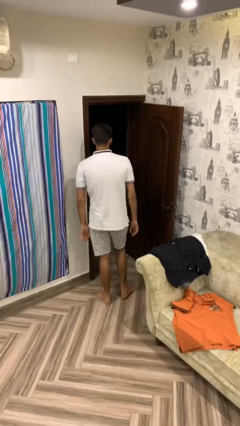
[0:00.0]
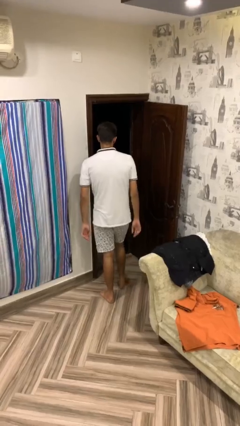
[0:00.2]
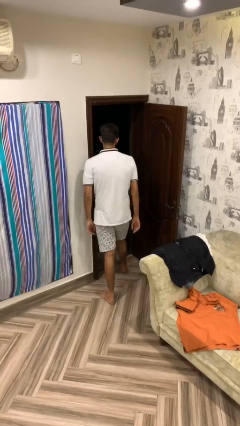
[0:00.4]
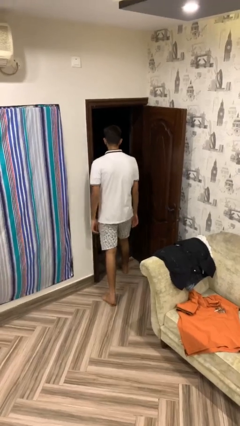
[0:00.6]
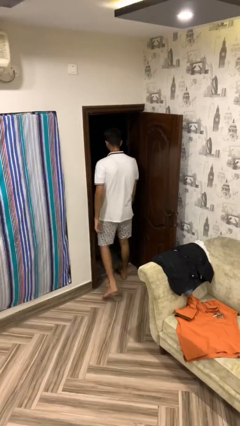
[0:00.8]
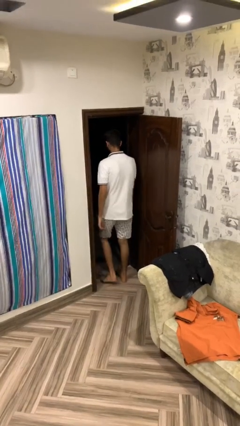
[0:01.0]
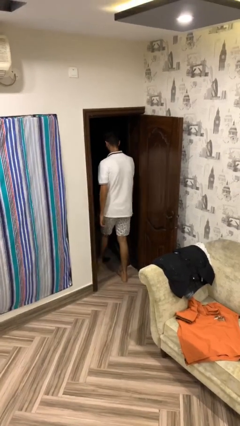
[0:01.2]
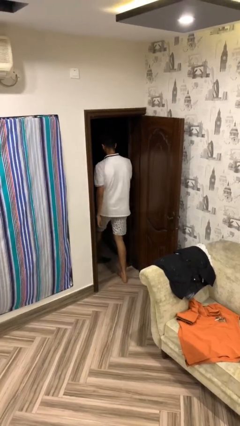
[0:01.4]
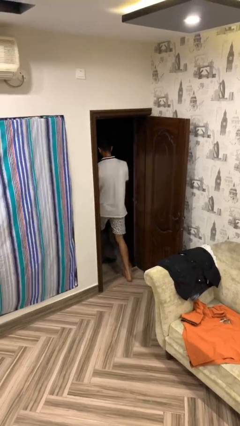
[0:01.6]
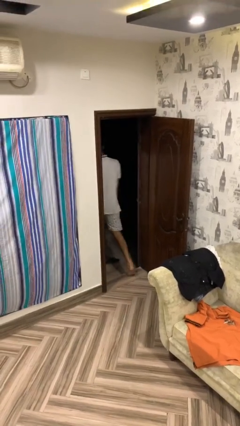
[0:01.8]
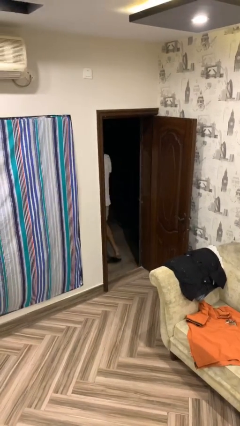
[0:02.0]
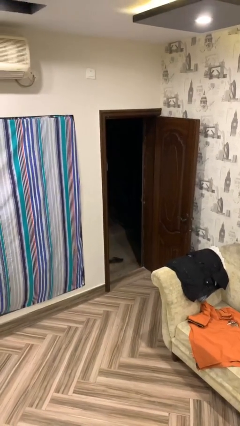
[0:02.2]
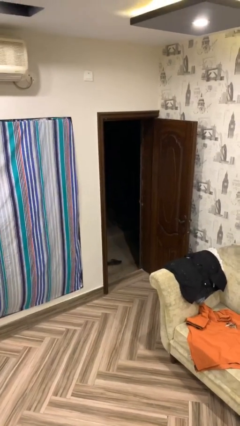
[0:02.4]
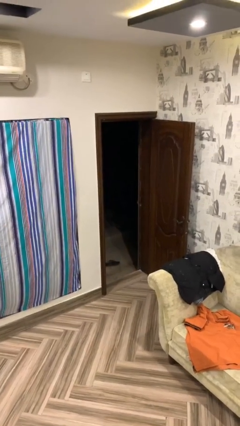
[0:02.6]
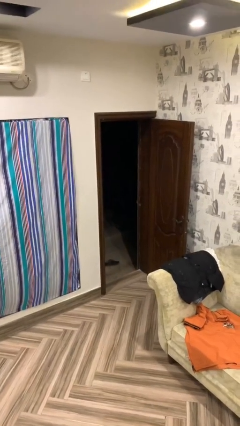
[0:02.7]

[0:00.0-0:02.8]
person exits scene through structure

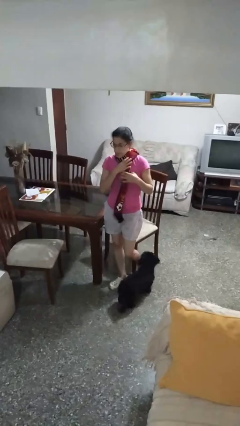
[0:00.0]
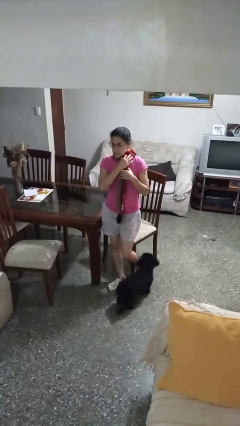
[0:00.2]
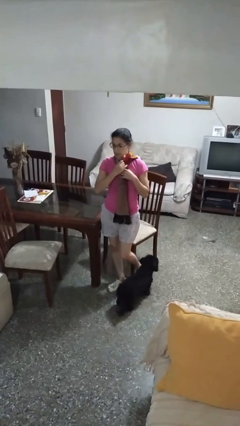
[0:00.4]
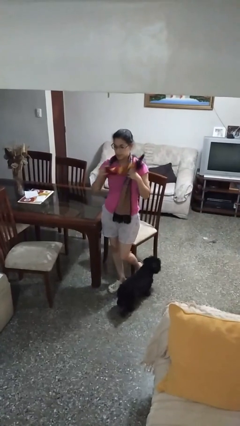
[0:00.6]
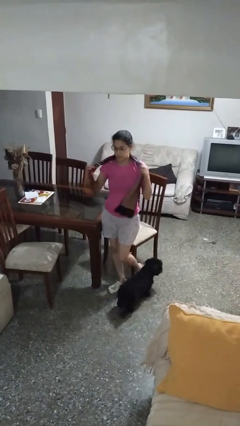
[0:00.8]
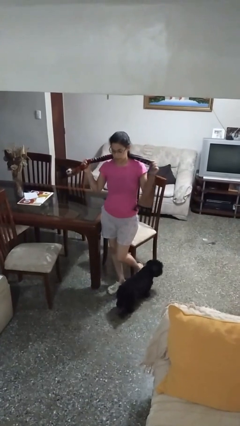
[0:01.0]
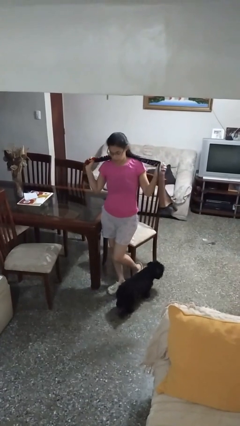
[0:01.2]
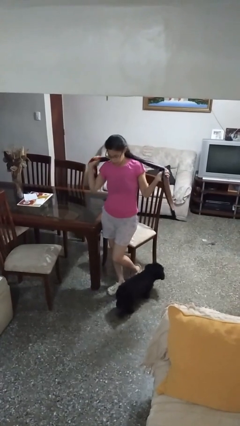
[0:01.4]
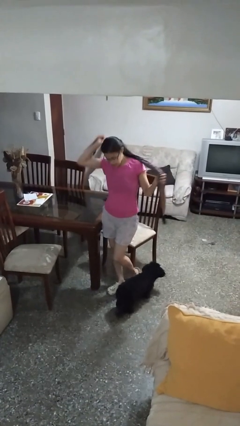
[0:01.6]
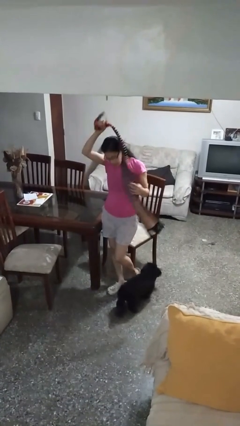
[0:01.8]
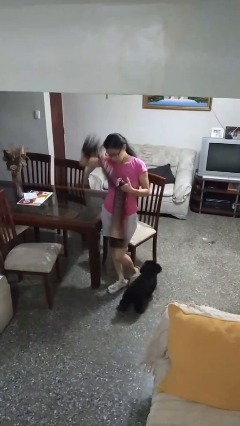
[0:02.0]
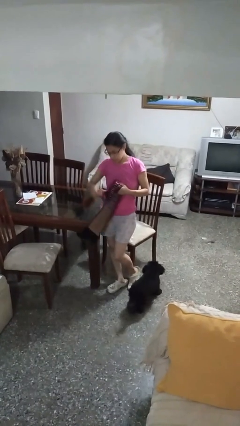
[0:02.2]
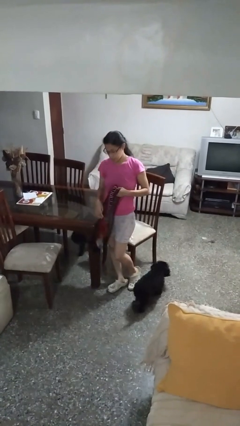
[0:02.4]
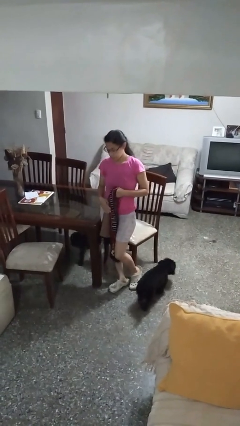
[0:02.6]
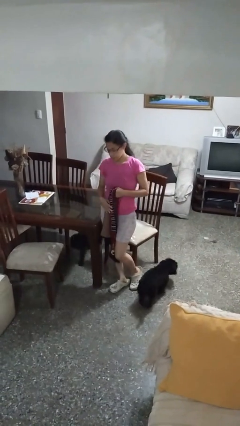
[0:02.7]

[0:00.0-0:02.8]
person takes off scarf

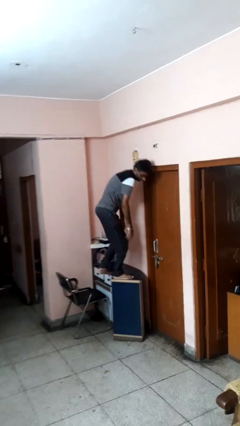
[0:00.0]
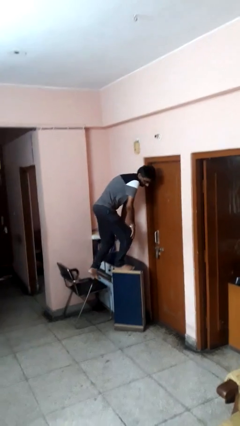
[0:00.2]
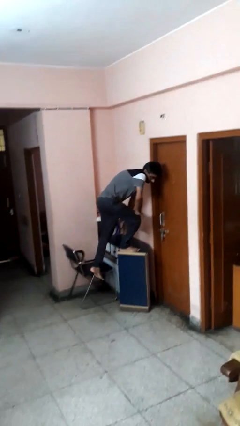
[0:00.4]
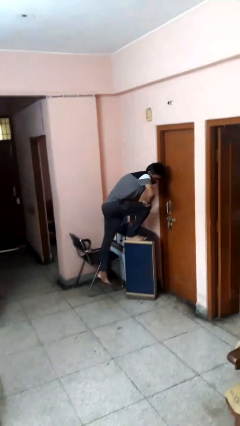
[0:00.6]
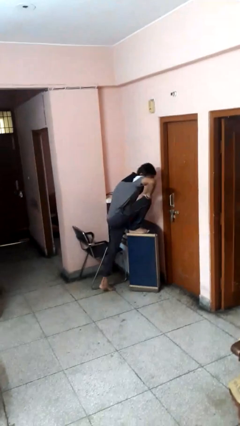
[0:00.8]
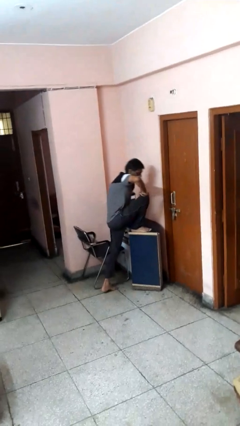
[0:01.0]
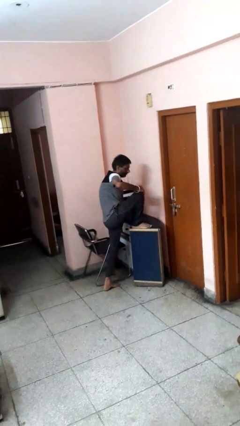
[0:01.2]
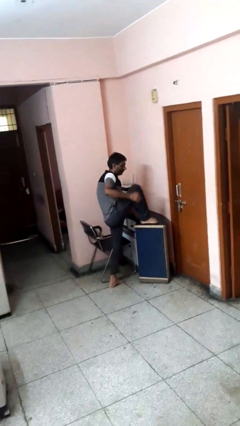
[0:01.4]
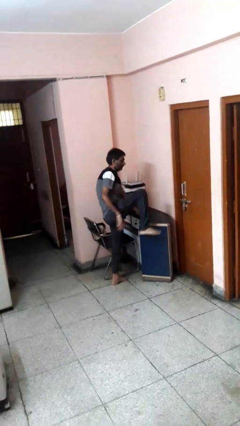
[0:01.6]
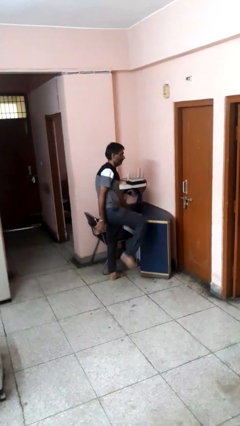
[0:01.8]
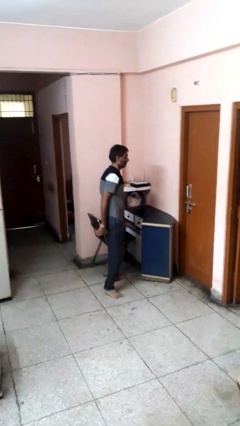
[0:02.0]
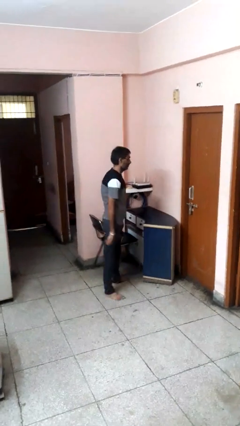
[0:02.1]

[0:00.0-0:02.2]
person climbs off table

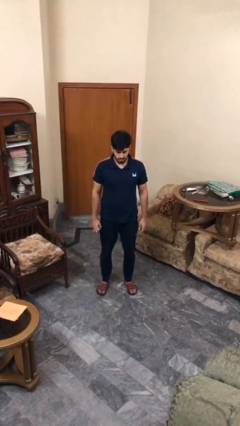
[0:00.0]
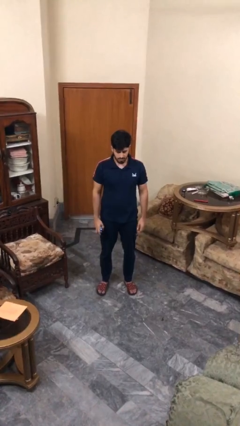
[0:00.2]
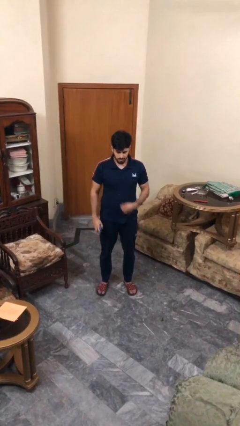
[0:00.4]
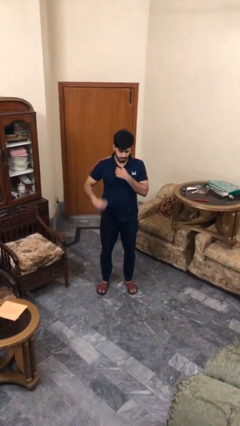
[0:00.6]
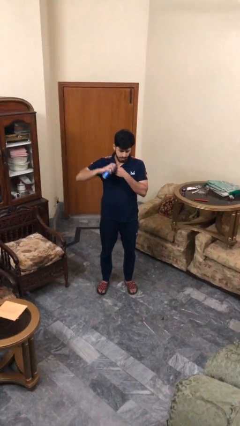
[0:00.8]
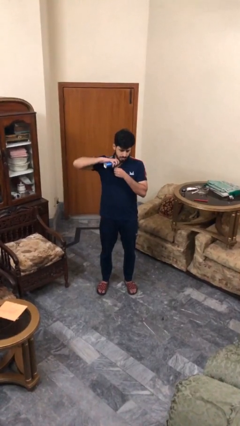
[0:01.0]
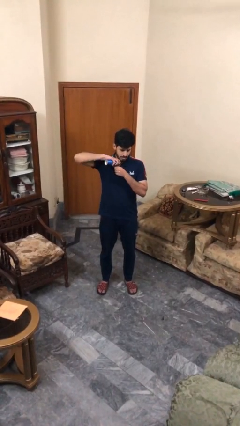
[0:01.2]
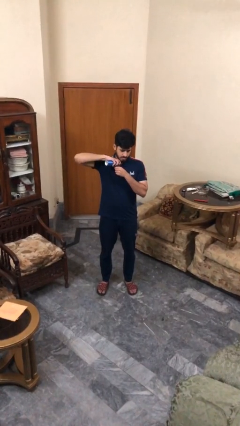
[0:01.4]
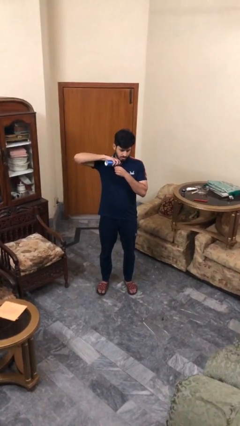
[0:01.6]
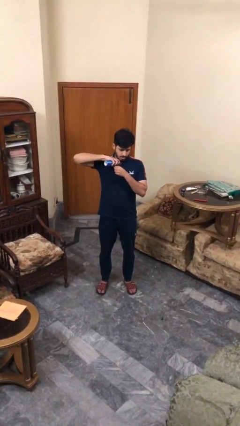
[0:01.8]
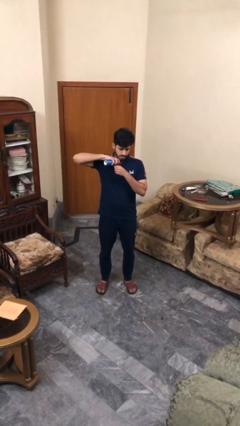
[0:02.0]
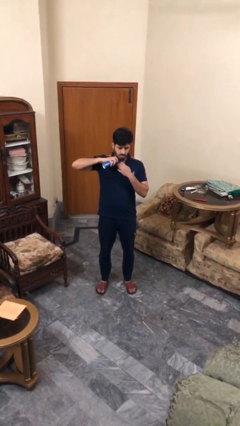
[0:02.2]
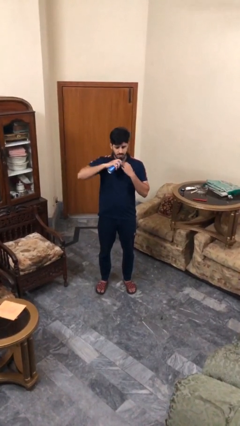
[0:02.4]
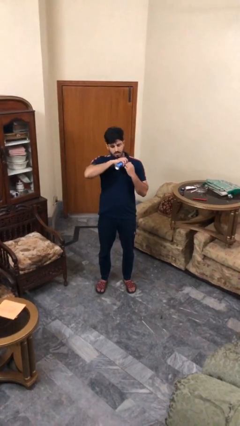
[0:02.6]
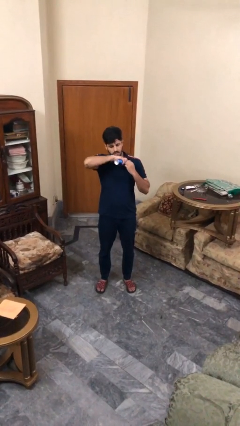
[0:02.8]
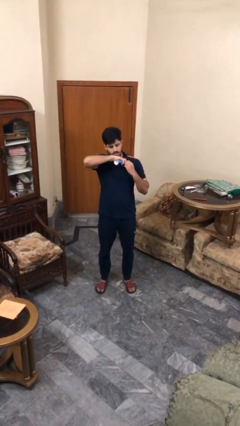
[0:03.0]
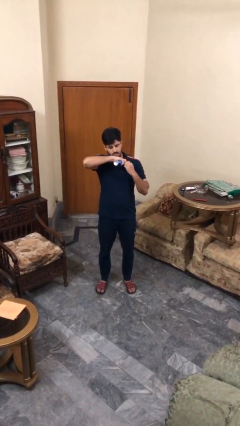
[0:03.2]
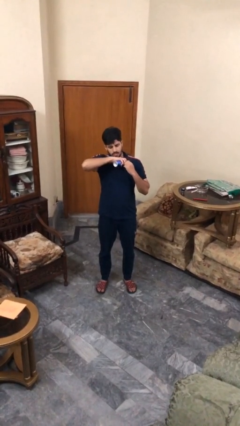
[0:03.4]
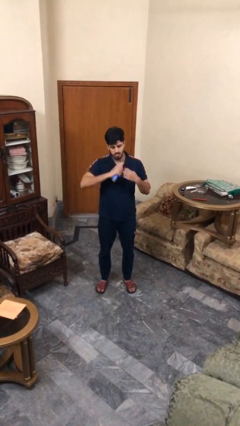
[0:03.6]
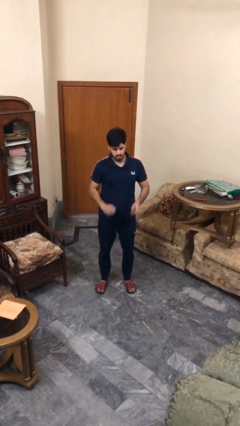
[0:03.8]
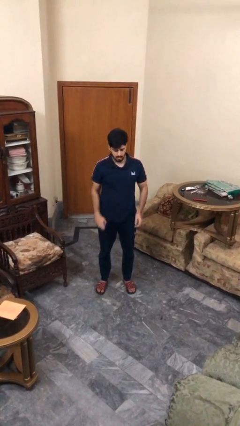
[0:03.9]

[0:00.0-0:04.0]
person applies deodorant

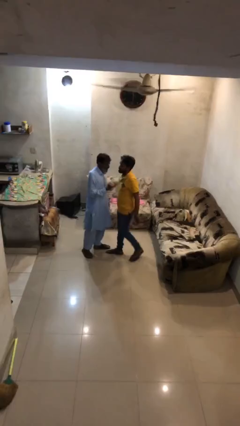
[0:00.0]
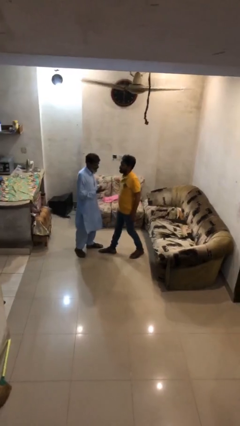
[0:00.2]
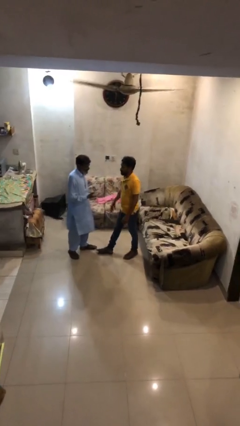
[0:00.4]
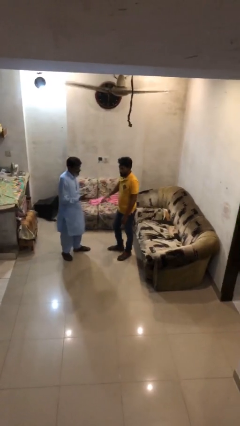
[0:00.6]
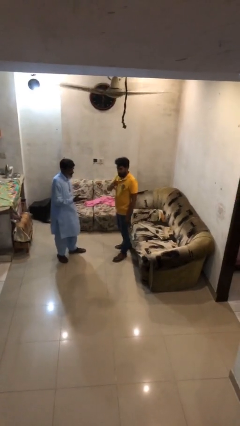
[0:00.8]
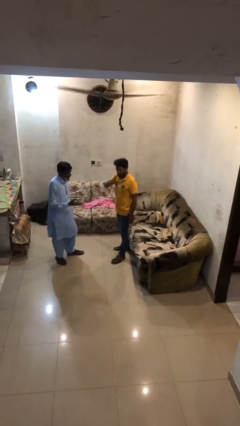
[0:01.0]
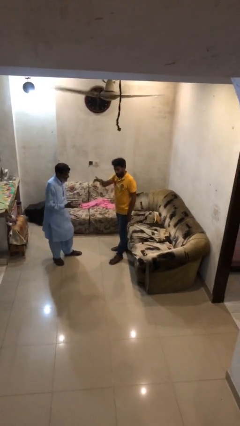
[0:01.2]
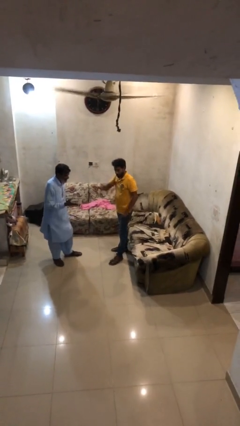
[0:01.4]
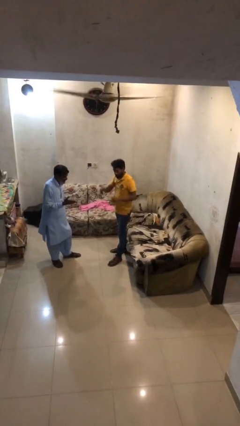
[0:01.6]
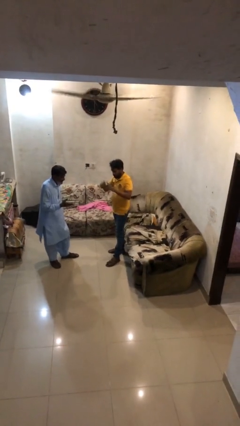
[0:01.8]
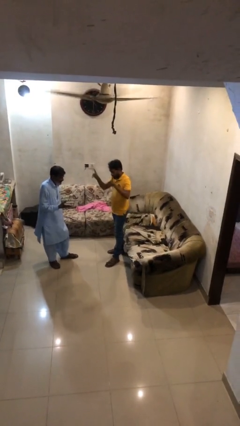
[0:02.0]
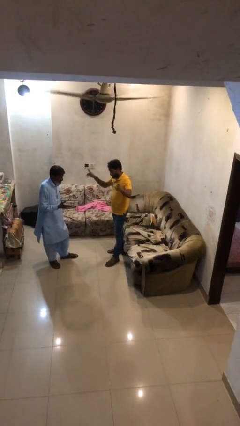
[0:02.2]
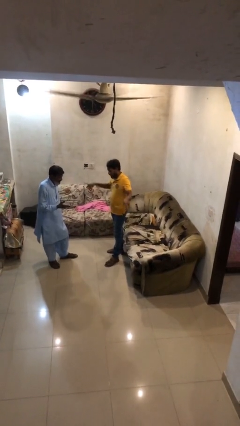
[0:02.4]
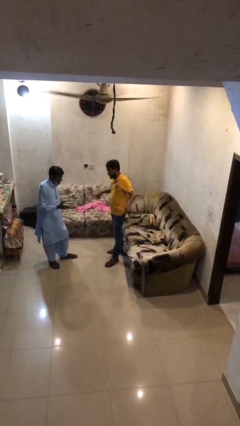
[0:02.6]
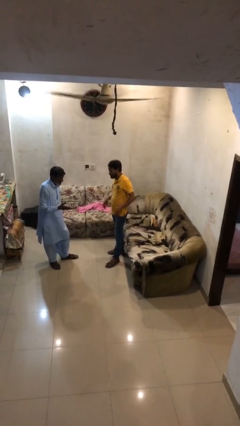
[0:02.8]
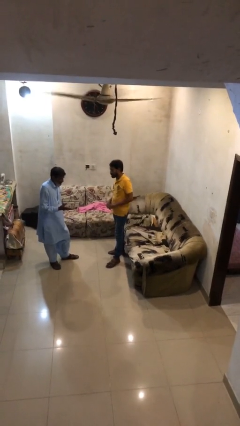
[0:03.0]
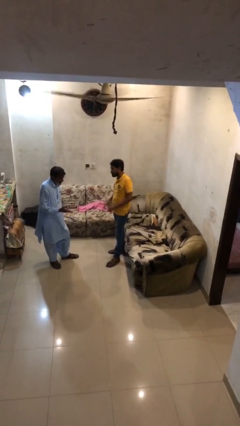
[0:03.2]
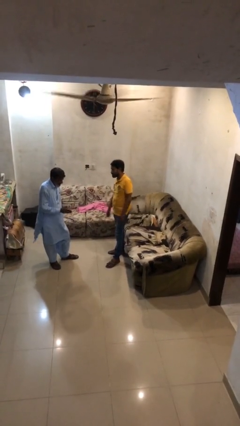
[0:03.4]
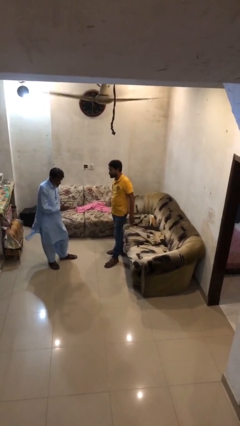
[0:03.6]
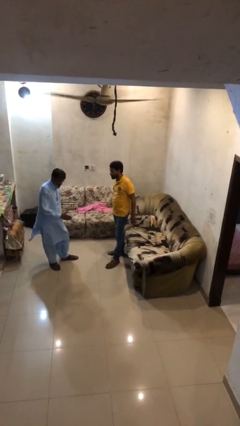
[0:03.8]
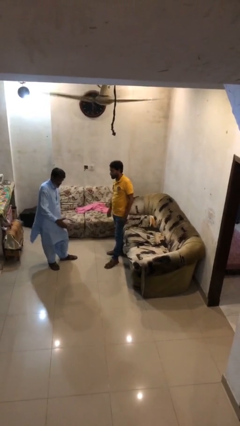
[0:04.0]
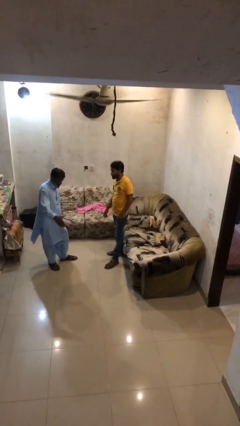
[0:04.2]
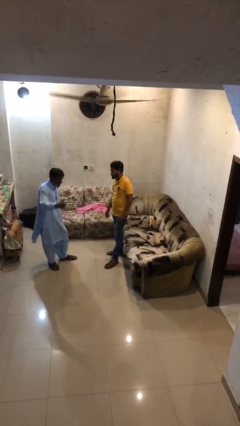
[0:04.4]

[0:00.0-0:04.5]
person talks to person

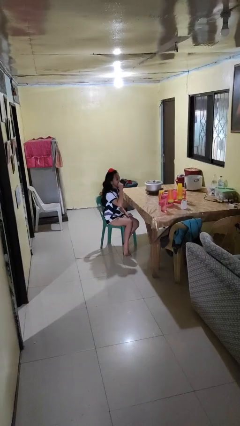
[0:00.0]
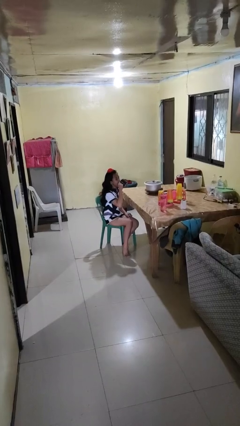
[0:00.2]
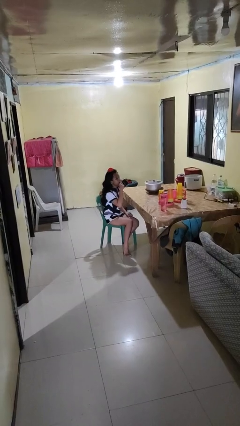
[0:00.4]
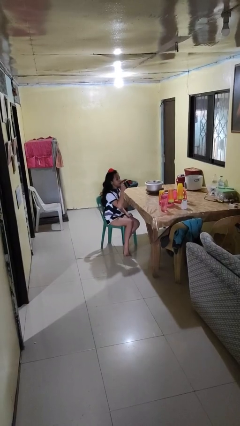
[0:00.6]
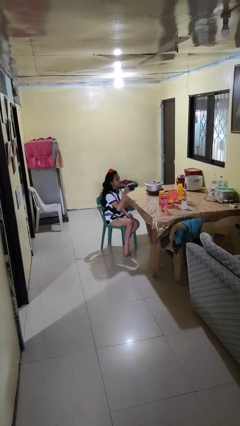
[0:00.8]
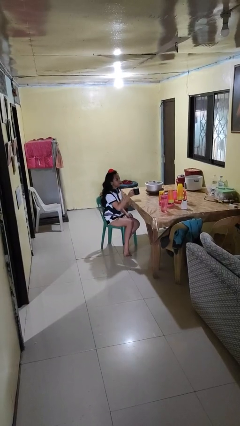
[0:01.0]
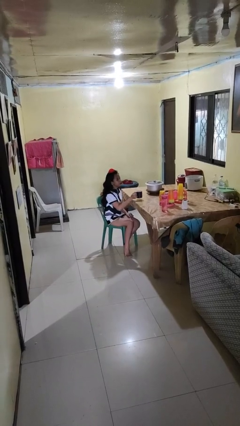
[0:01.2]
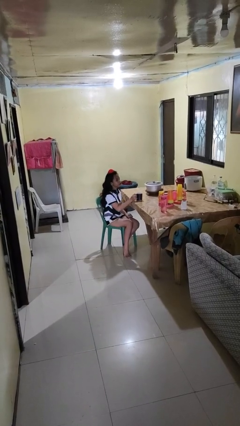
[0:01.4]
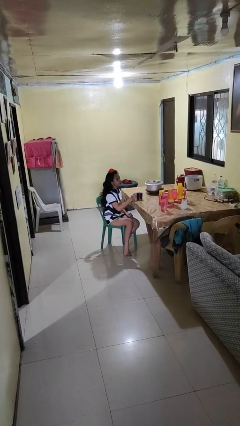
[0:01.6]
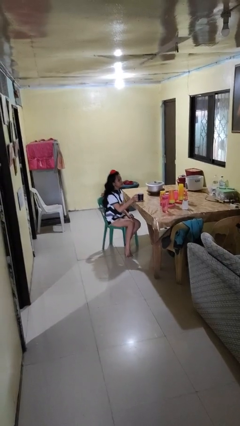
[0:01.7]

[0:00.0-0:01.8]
person puts down object on table
